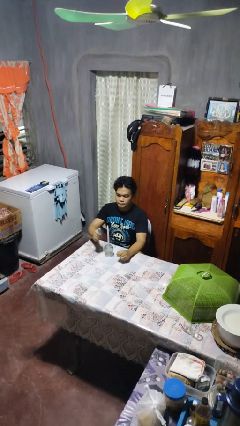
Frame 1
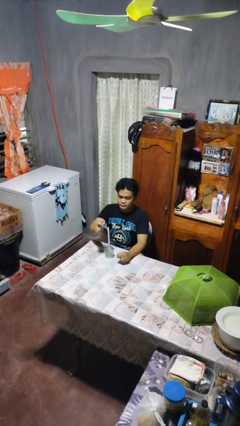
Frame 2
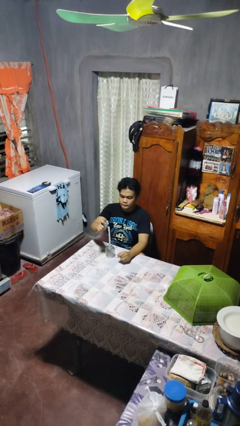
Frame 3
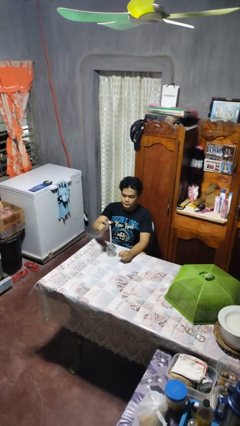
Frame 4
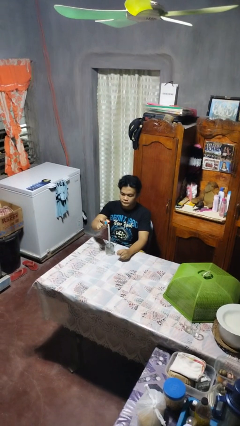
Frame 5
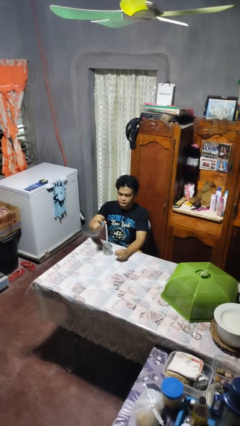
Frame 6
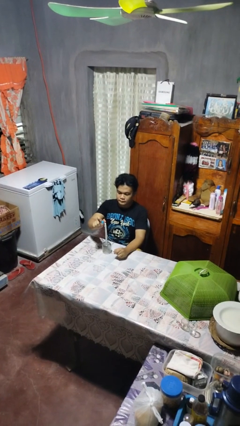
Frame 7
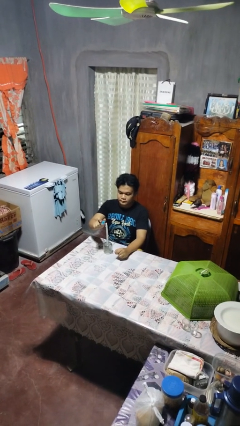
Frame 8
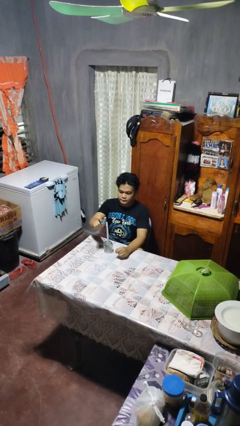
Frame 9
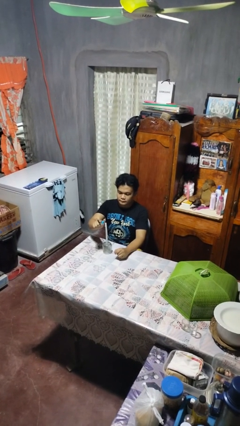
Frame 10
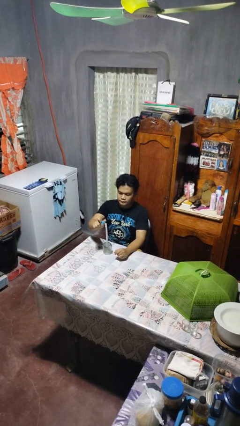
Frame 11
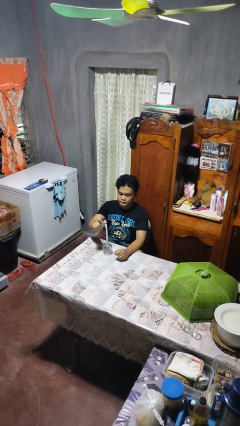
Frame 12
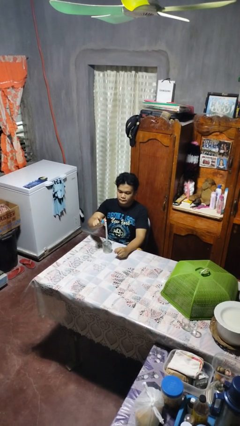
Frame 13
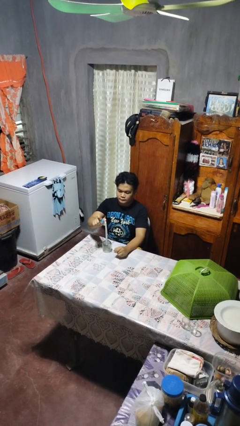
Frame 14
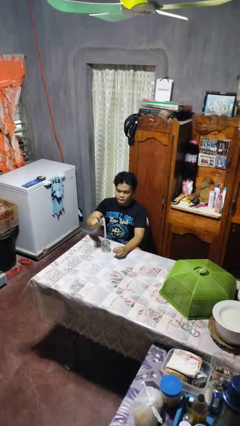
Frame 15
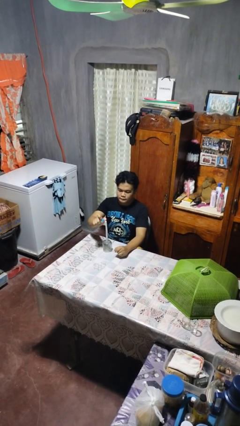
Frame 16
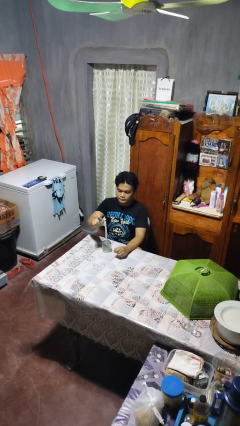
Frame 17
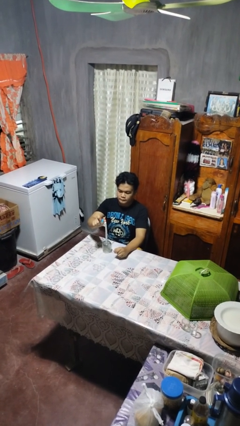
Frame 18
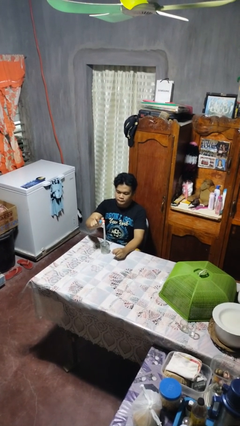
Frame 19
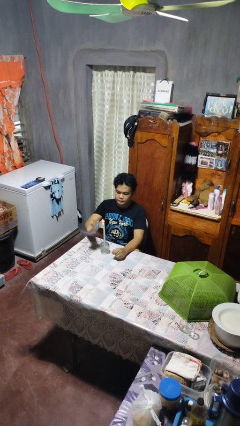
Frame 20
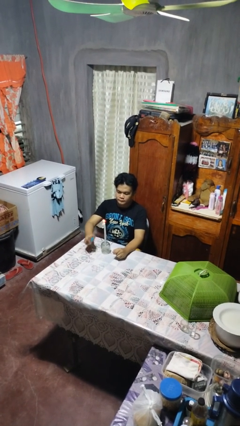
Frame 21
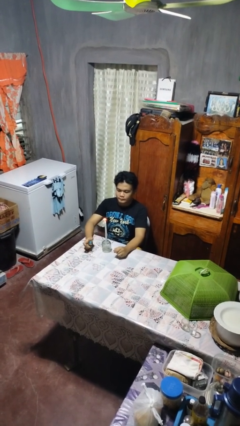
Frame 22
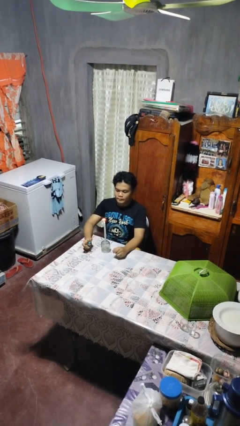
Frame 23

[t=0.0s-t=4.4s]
person lights candle

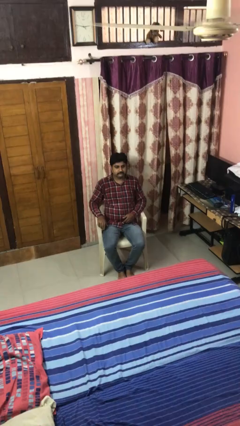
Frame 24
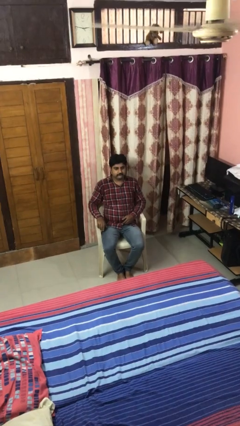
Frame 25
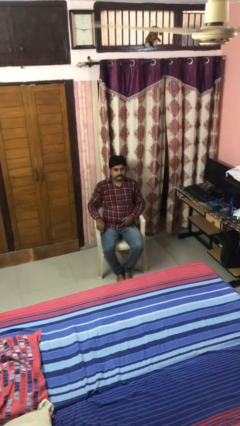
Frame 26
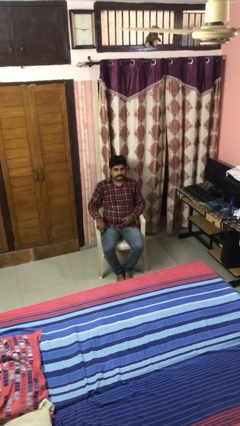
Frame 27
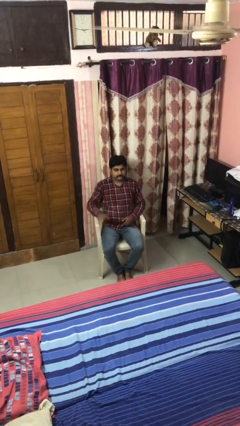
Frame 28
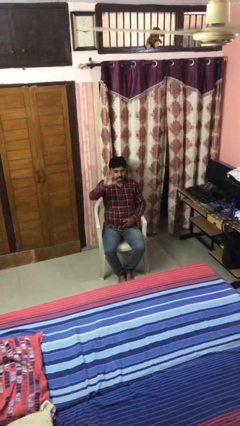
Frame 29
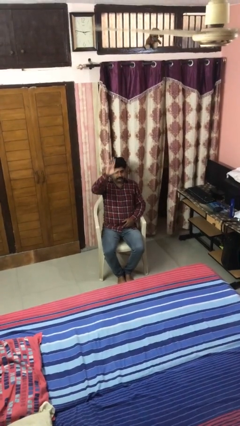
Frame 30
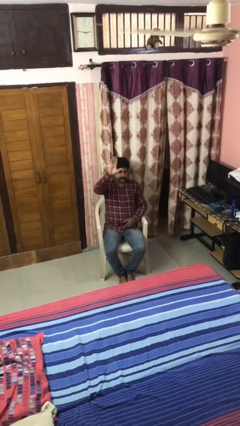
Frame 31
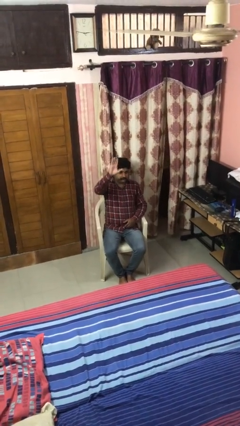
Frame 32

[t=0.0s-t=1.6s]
person gestures raise hand

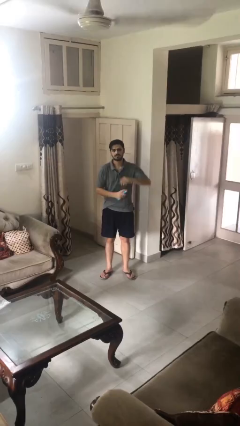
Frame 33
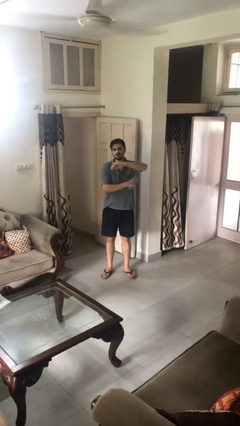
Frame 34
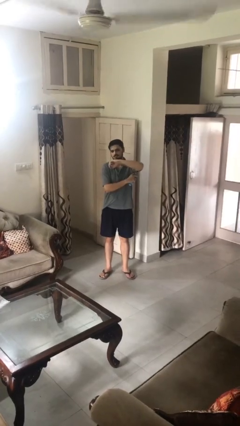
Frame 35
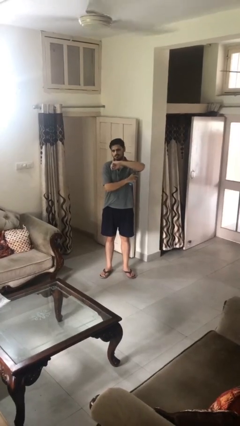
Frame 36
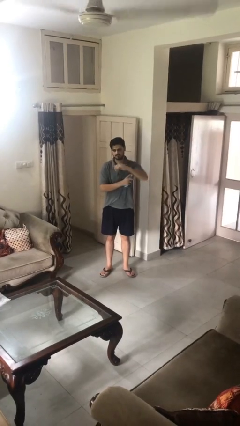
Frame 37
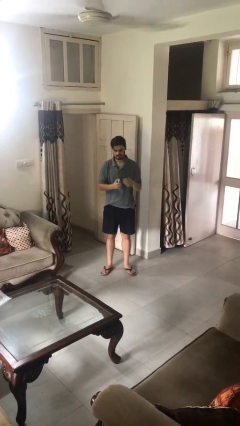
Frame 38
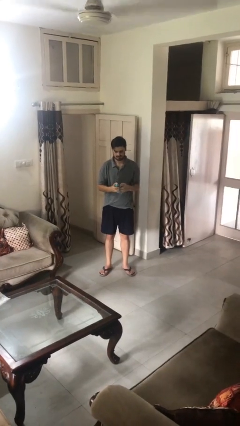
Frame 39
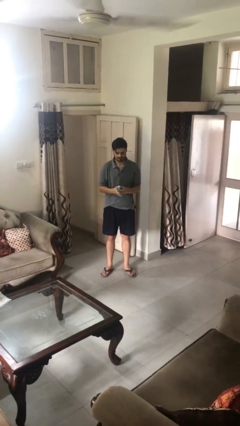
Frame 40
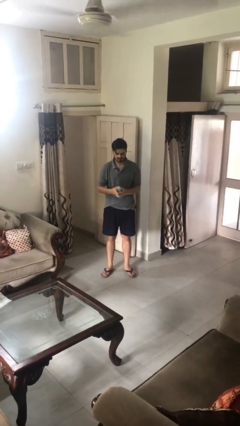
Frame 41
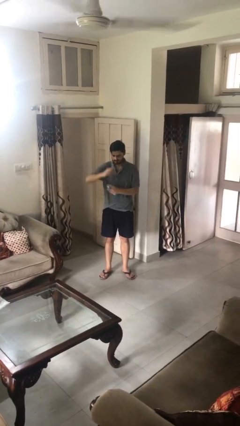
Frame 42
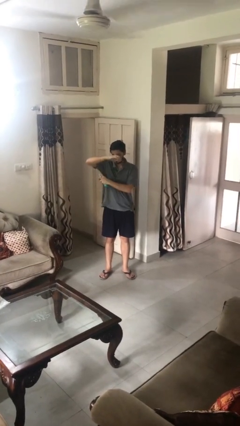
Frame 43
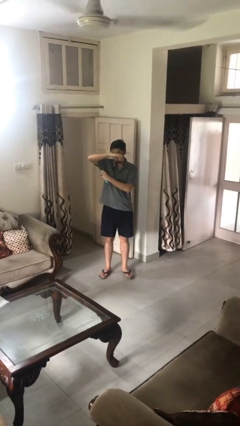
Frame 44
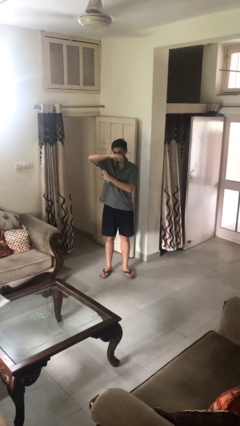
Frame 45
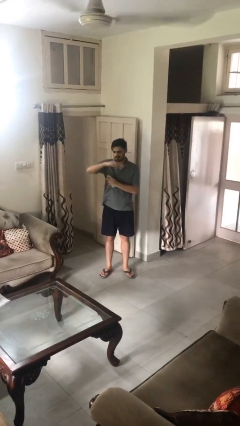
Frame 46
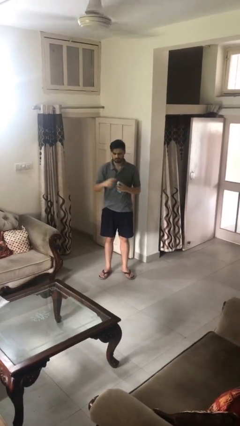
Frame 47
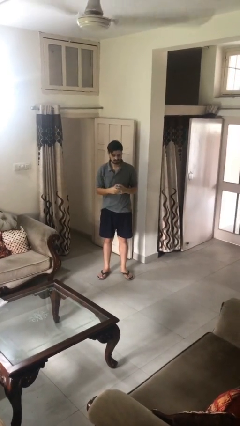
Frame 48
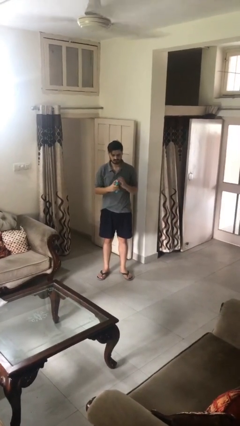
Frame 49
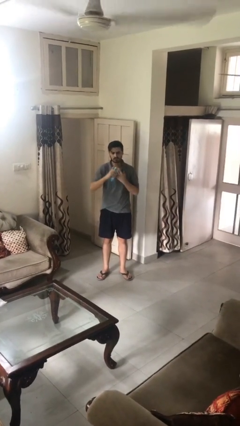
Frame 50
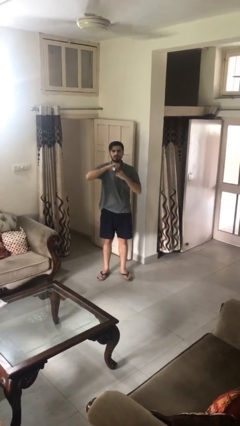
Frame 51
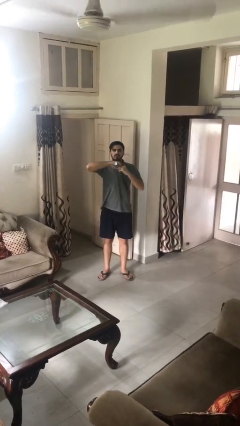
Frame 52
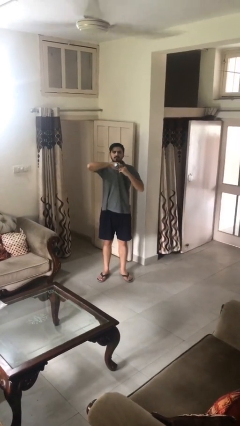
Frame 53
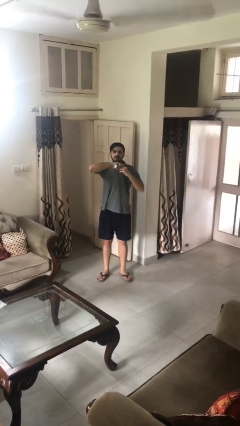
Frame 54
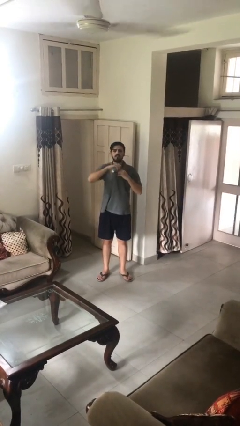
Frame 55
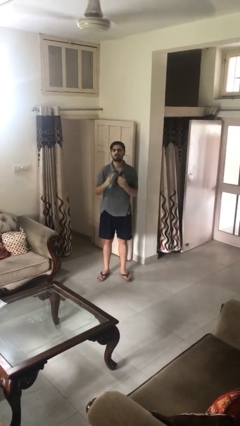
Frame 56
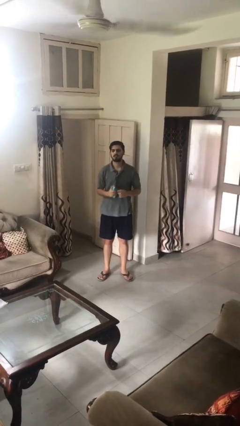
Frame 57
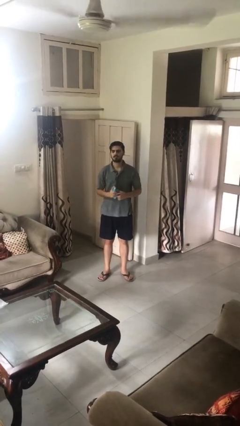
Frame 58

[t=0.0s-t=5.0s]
person applies deodorant

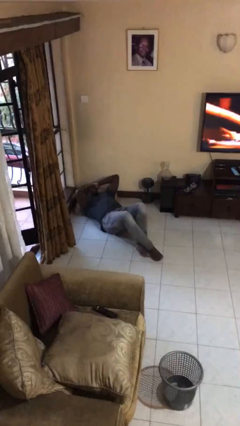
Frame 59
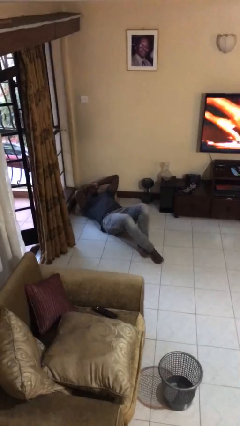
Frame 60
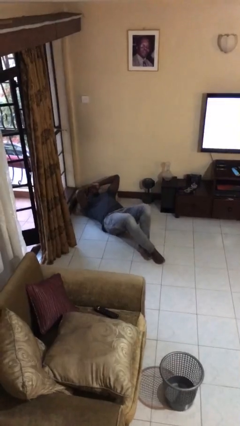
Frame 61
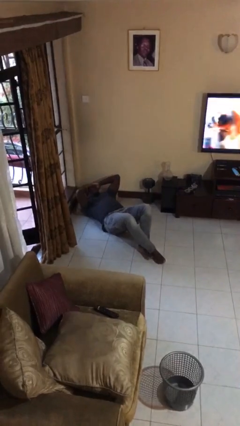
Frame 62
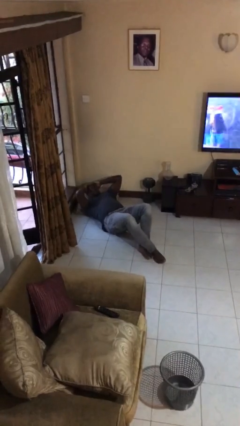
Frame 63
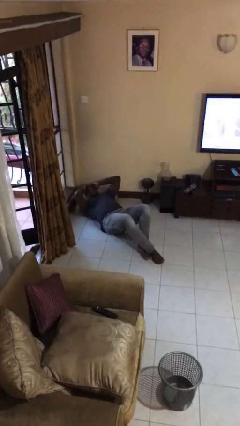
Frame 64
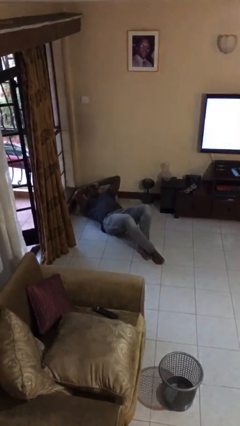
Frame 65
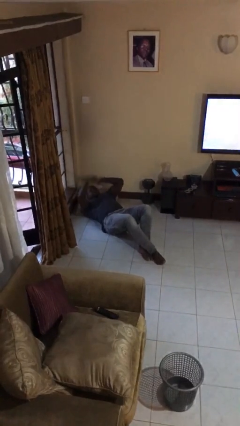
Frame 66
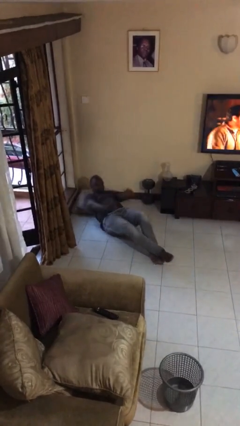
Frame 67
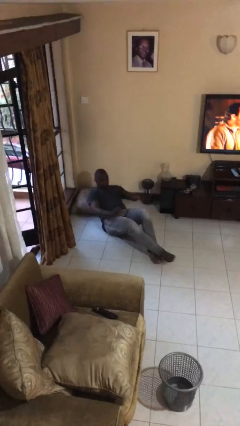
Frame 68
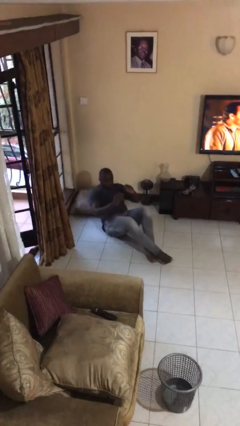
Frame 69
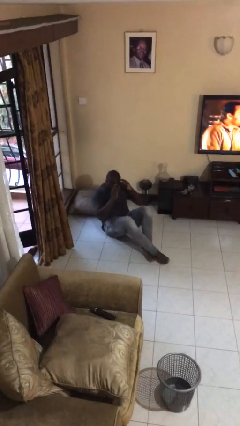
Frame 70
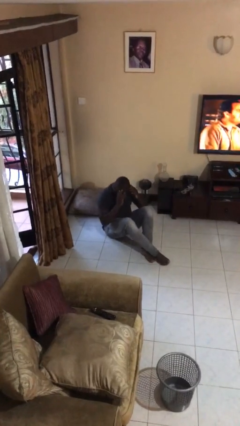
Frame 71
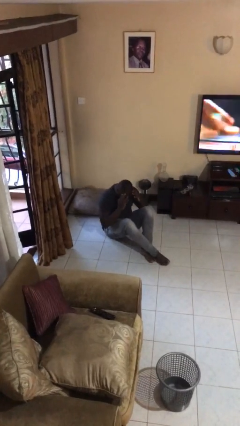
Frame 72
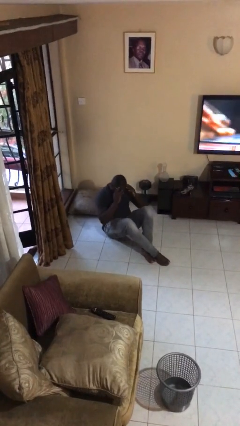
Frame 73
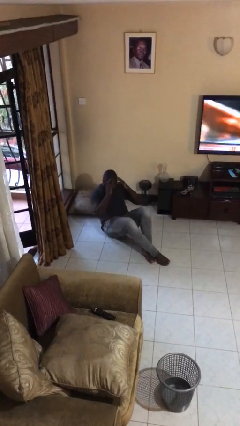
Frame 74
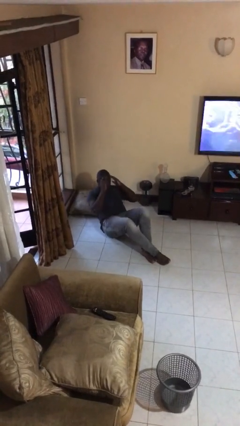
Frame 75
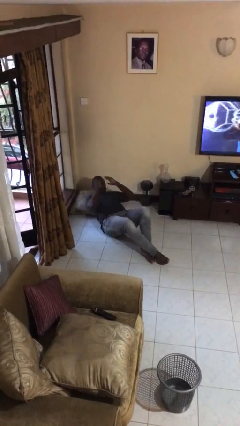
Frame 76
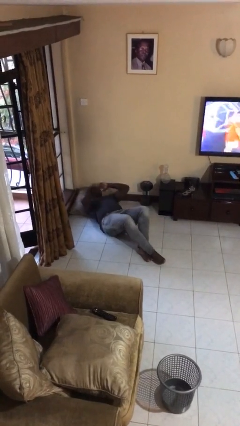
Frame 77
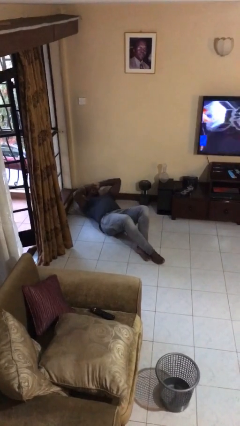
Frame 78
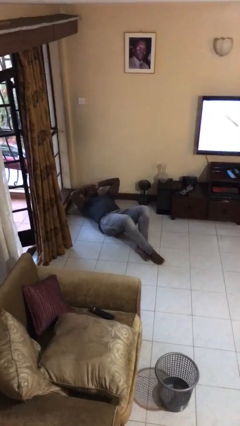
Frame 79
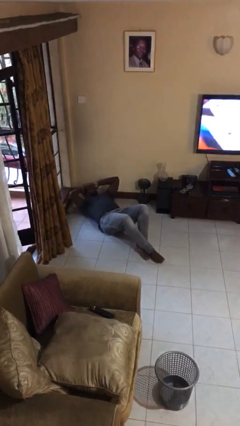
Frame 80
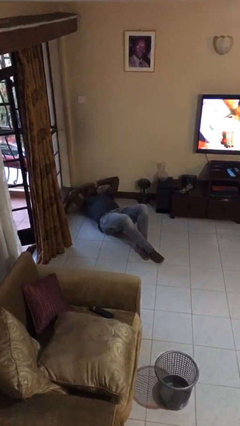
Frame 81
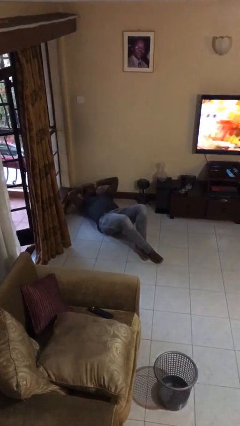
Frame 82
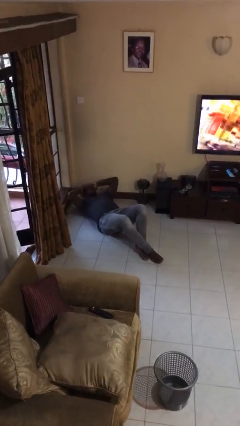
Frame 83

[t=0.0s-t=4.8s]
person exercises with situp

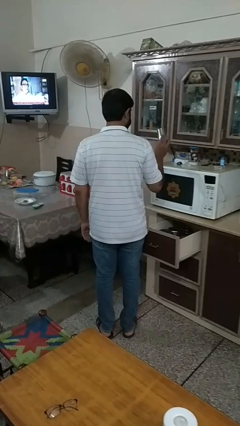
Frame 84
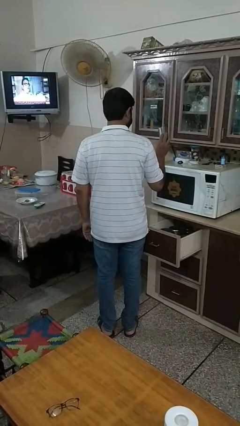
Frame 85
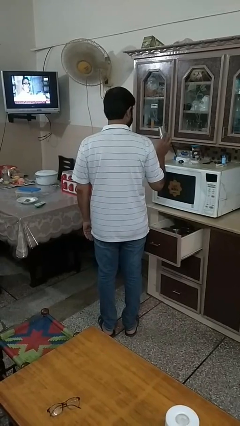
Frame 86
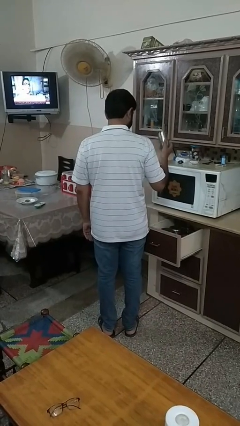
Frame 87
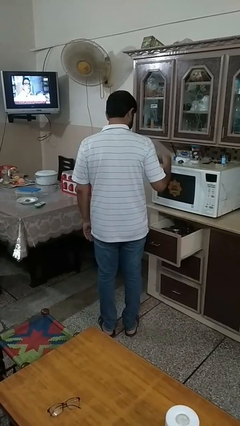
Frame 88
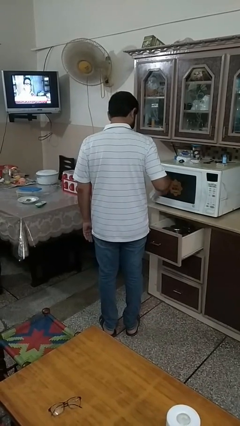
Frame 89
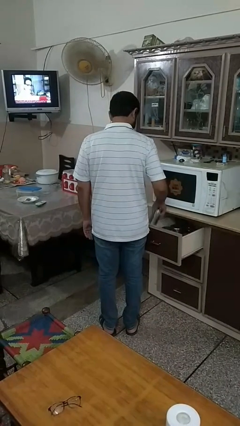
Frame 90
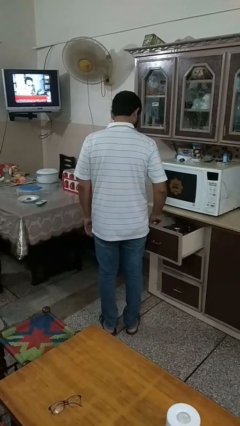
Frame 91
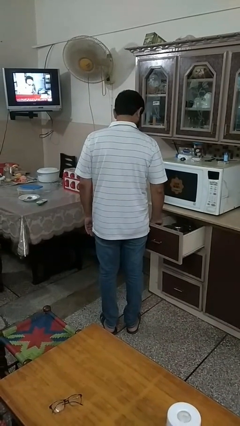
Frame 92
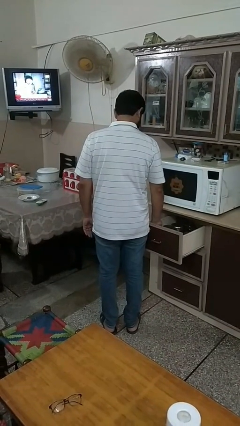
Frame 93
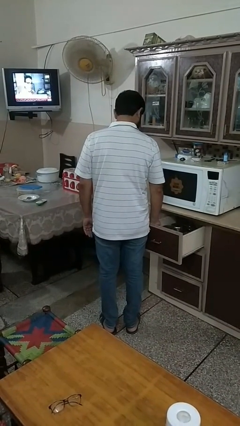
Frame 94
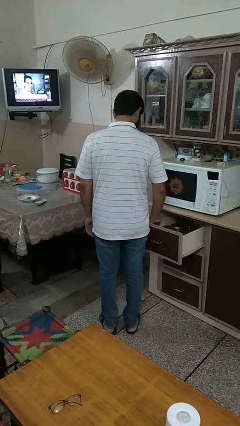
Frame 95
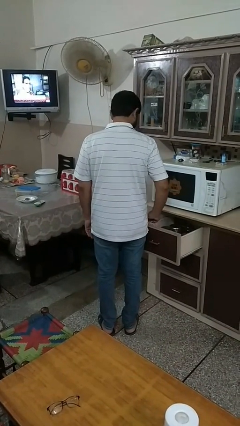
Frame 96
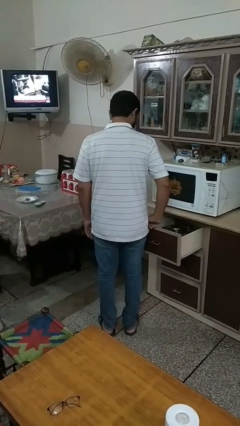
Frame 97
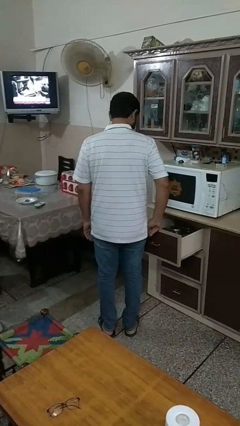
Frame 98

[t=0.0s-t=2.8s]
person puts object into kitchen drawer
